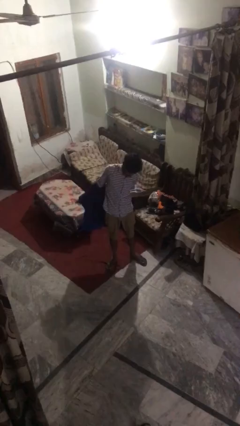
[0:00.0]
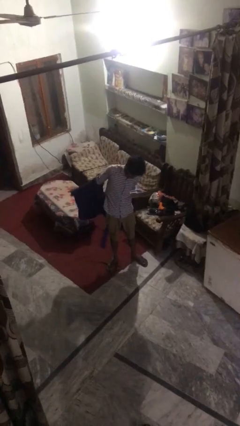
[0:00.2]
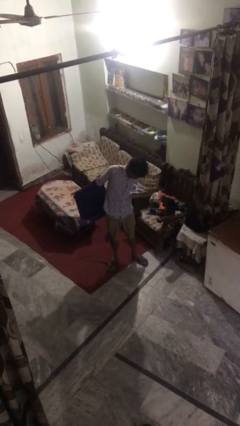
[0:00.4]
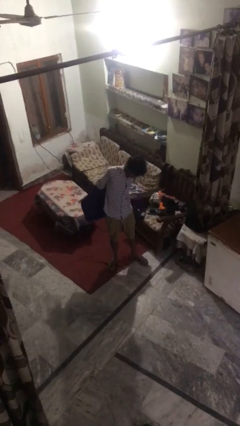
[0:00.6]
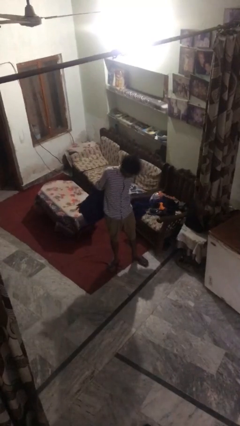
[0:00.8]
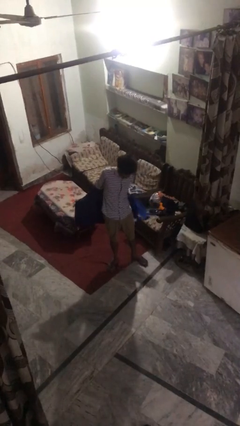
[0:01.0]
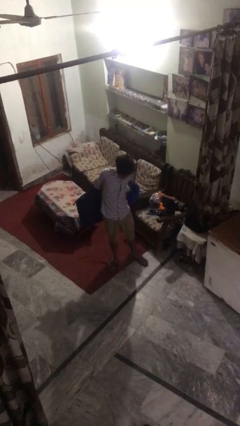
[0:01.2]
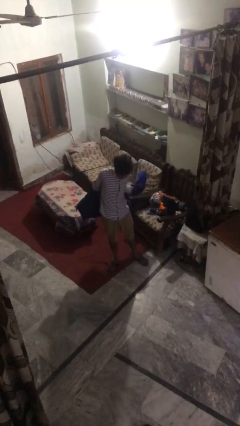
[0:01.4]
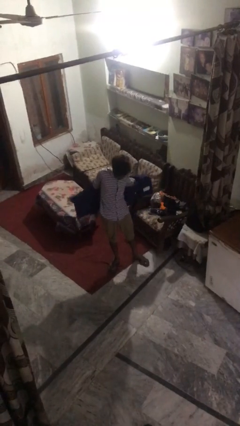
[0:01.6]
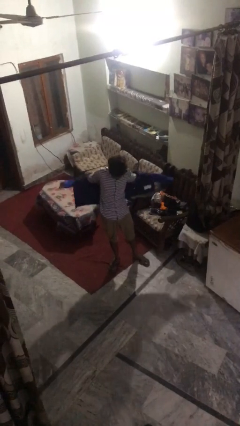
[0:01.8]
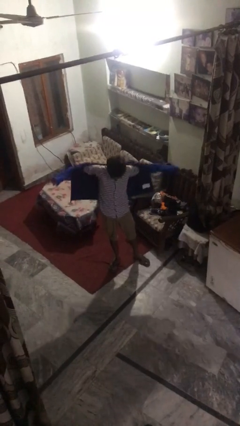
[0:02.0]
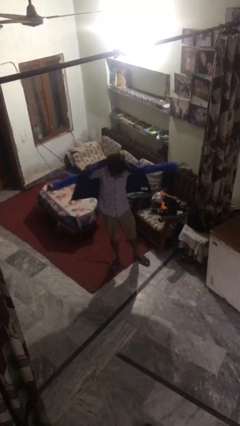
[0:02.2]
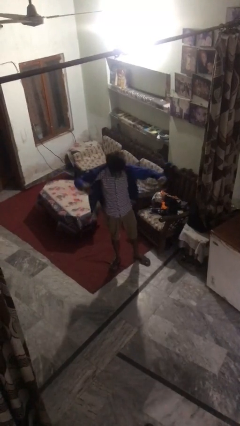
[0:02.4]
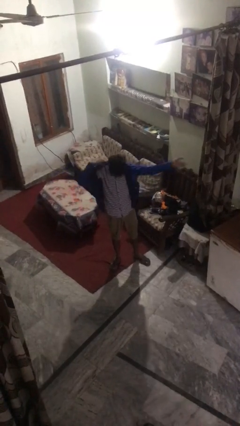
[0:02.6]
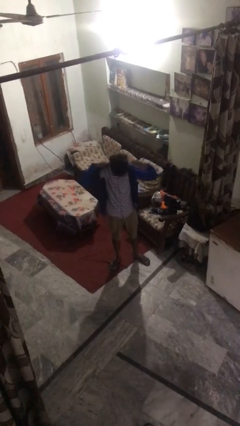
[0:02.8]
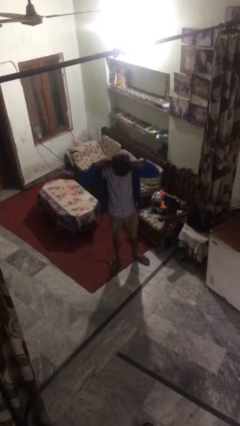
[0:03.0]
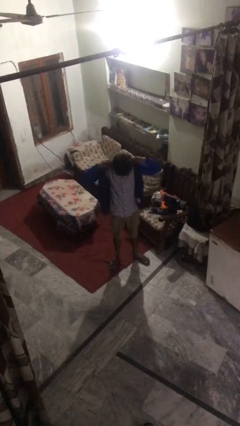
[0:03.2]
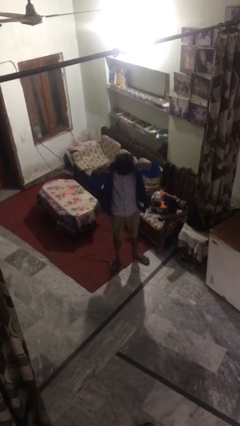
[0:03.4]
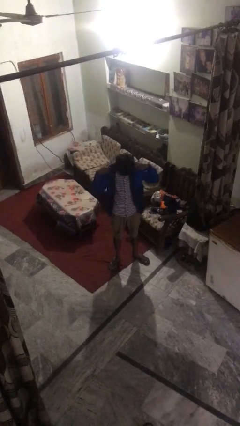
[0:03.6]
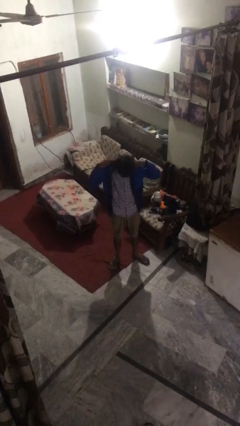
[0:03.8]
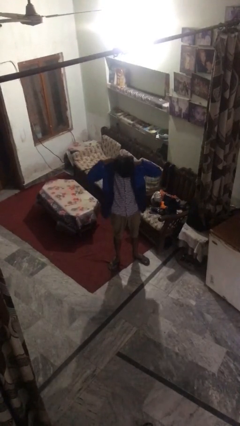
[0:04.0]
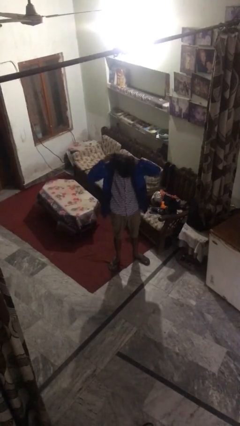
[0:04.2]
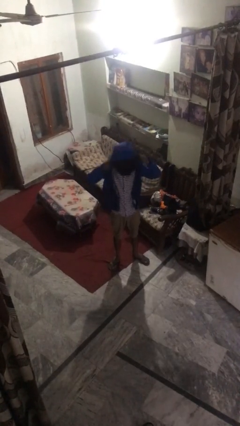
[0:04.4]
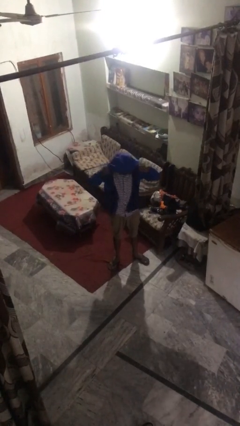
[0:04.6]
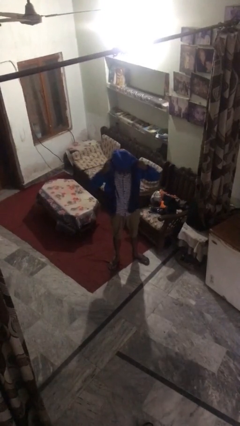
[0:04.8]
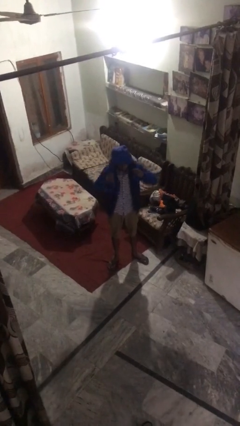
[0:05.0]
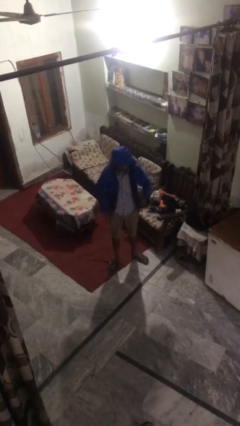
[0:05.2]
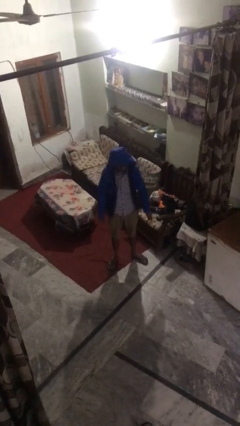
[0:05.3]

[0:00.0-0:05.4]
person puts on hoodie

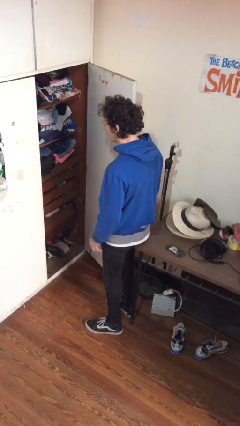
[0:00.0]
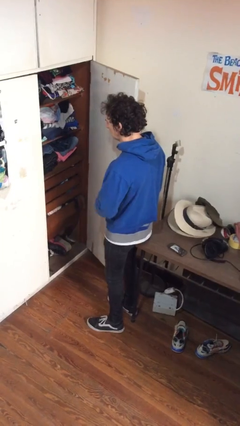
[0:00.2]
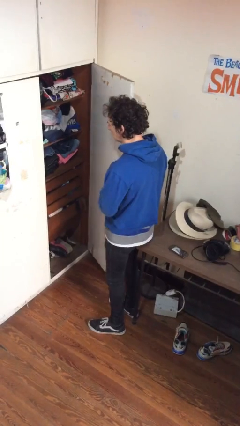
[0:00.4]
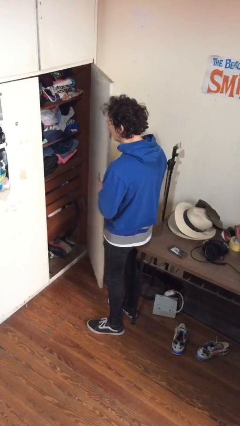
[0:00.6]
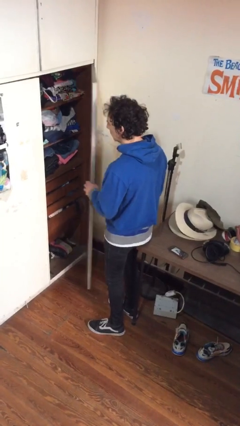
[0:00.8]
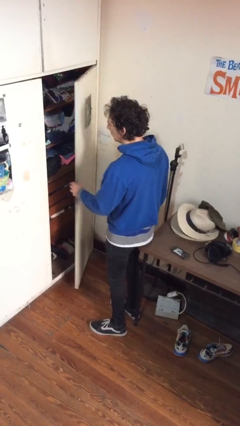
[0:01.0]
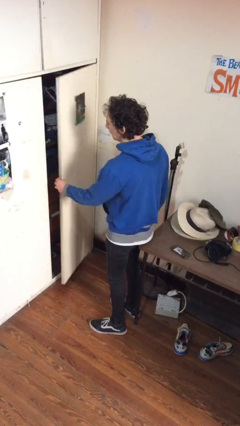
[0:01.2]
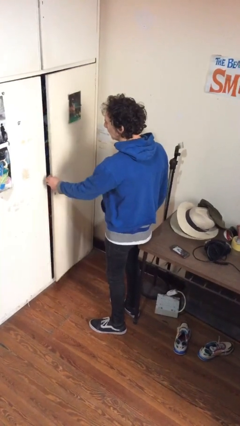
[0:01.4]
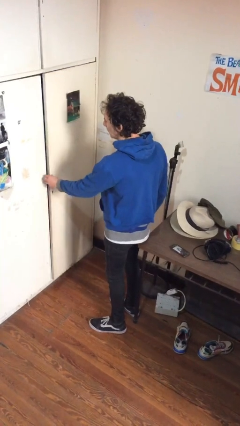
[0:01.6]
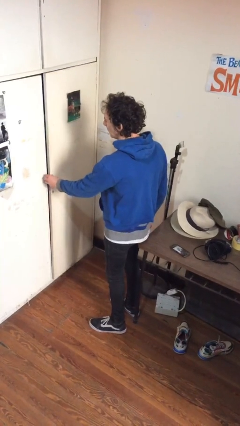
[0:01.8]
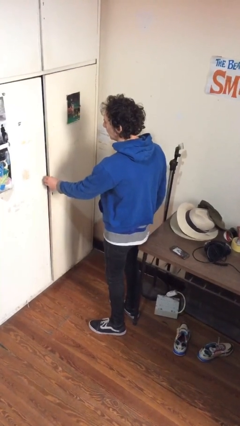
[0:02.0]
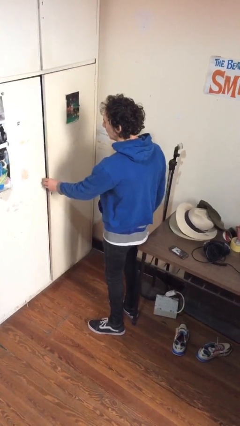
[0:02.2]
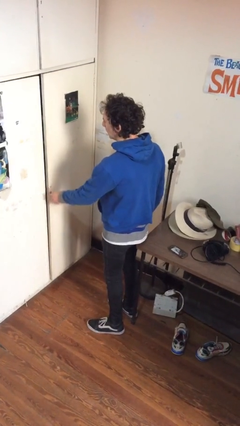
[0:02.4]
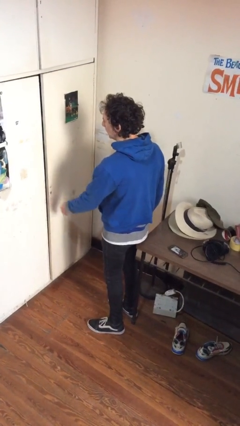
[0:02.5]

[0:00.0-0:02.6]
person closes closet door

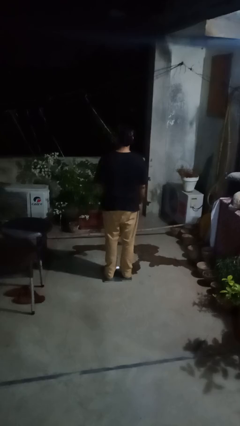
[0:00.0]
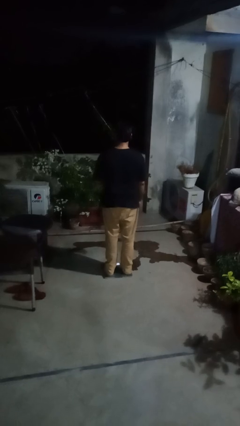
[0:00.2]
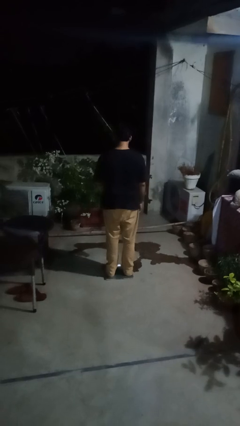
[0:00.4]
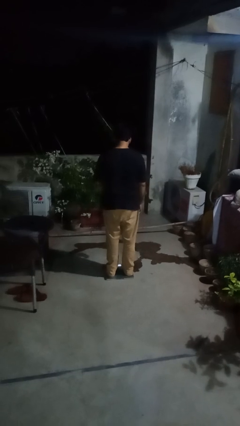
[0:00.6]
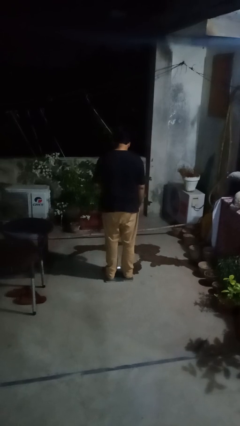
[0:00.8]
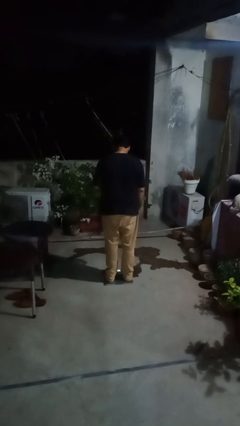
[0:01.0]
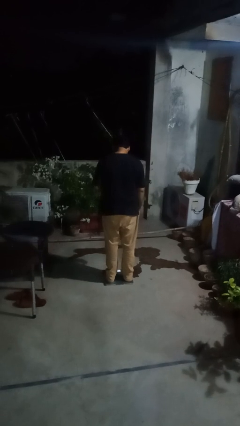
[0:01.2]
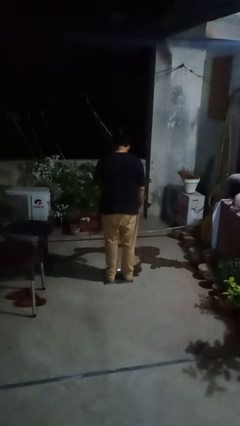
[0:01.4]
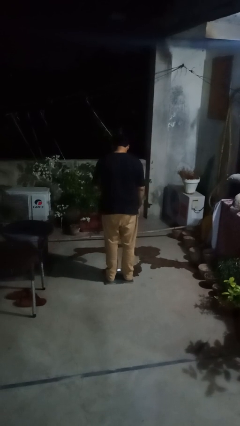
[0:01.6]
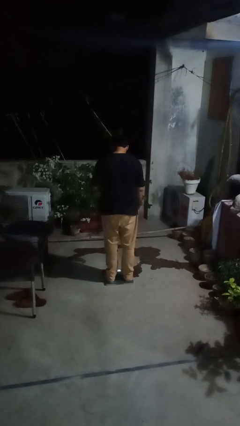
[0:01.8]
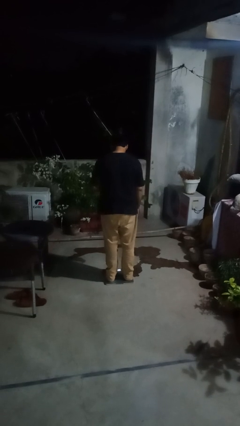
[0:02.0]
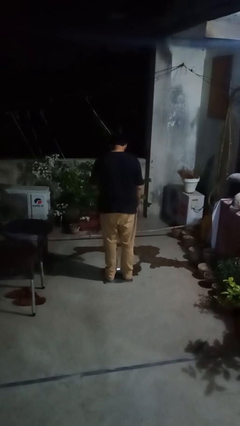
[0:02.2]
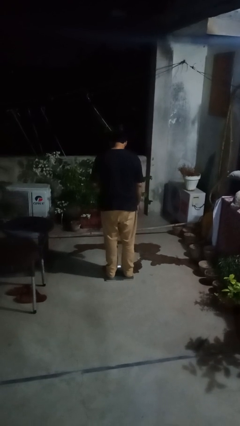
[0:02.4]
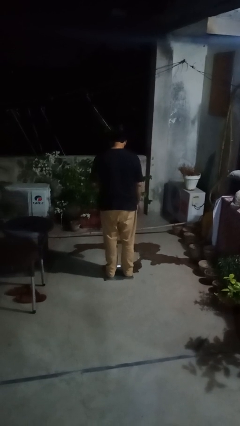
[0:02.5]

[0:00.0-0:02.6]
person uses bodyweight scale

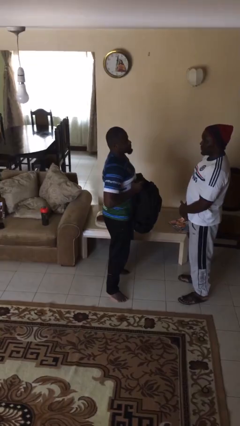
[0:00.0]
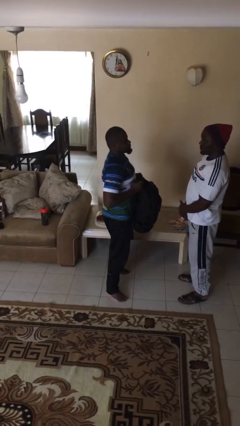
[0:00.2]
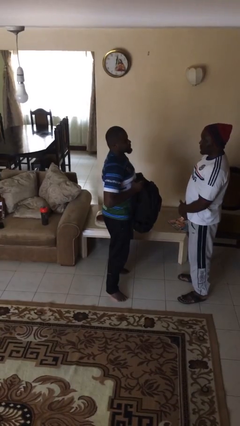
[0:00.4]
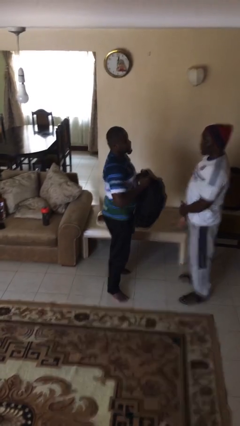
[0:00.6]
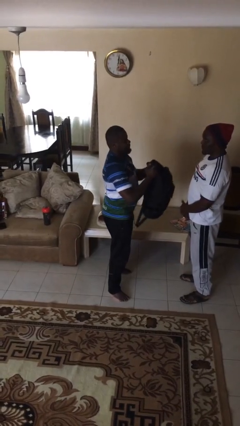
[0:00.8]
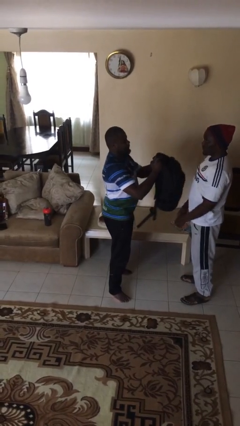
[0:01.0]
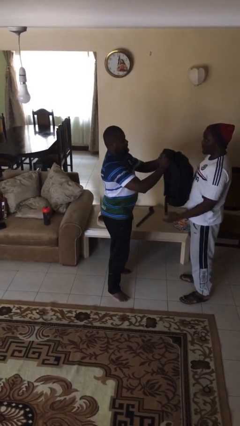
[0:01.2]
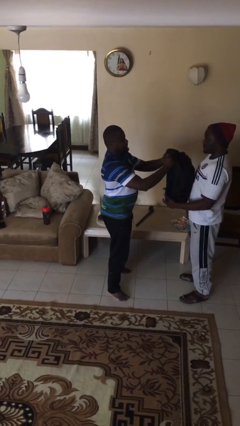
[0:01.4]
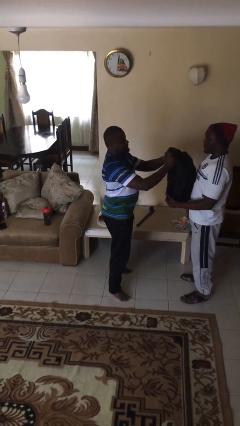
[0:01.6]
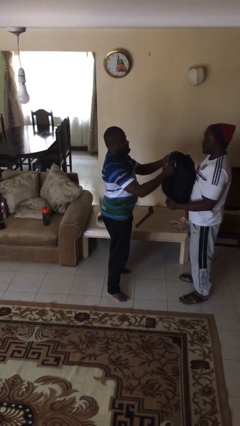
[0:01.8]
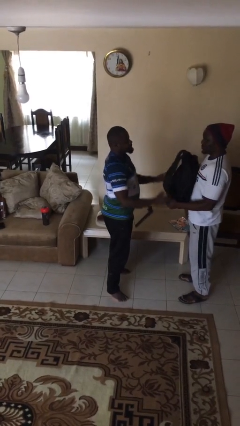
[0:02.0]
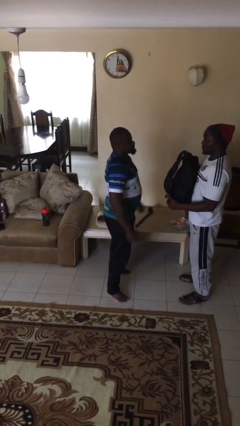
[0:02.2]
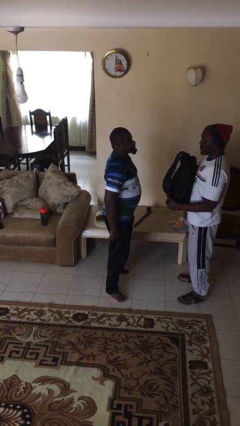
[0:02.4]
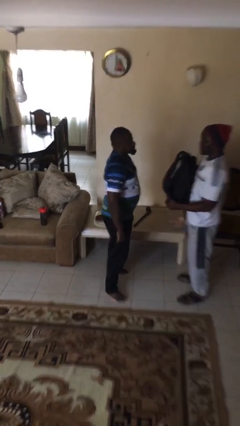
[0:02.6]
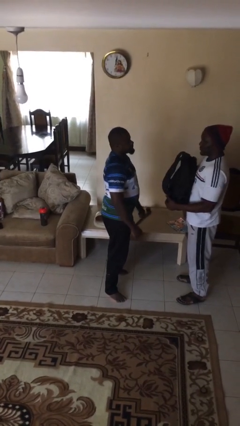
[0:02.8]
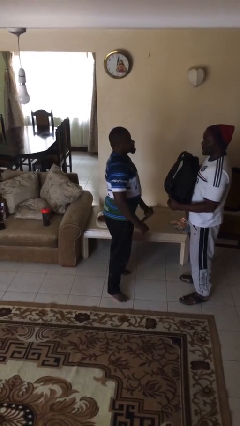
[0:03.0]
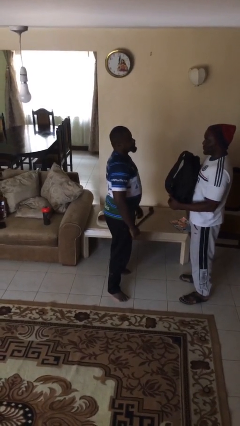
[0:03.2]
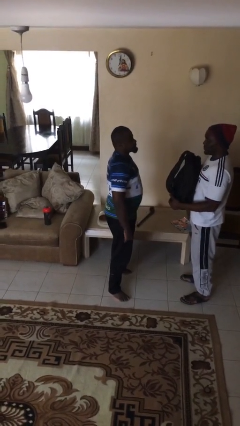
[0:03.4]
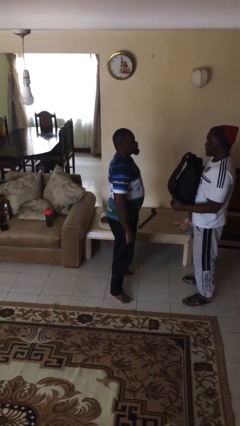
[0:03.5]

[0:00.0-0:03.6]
person transfers object to person

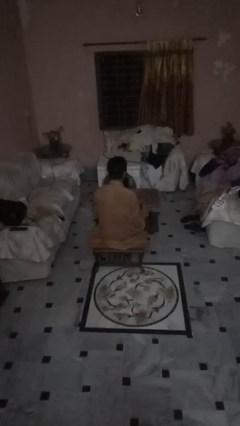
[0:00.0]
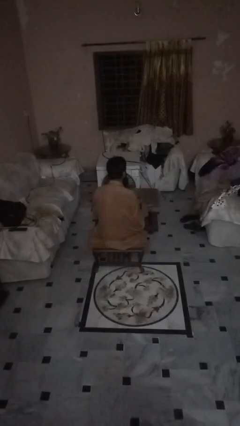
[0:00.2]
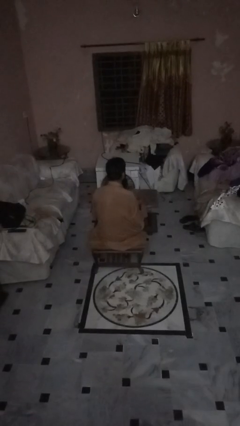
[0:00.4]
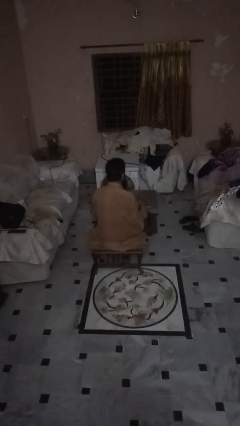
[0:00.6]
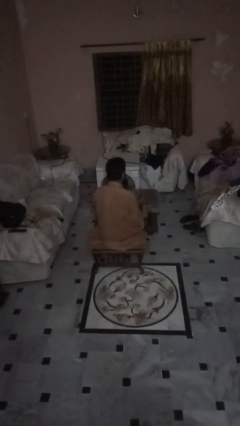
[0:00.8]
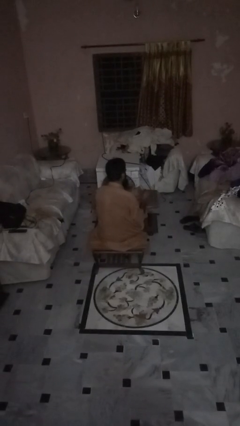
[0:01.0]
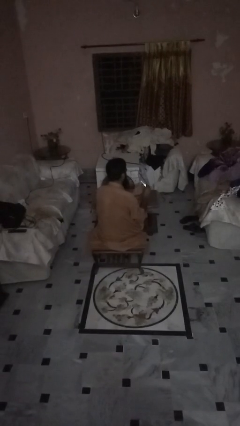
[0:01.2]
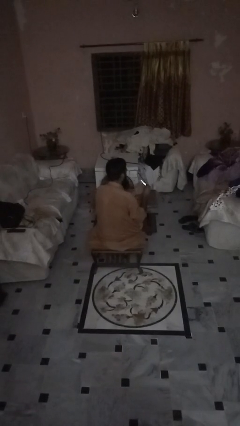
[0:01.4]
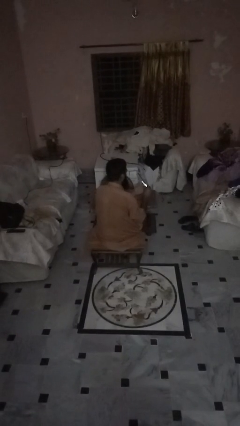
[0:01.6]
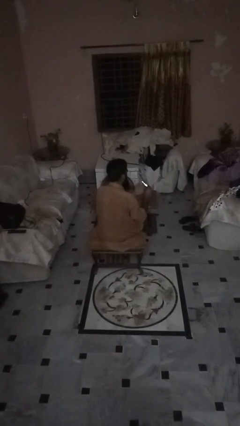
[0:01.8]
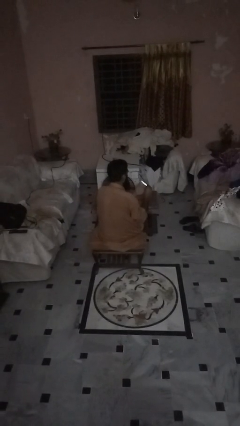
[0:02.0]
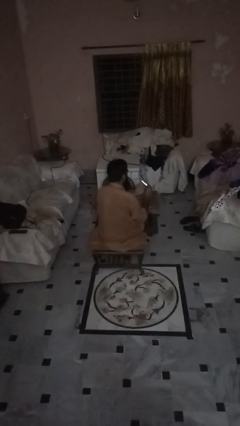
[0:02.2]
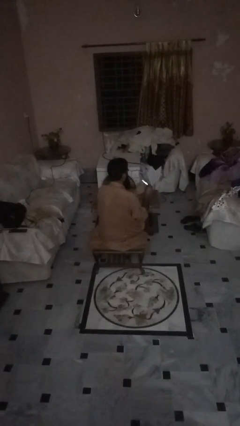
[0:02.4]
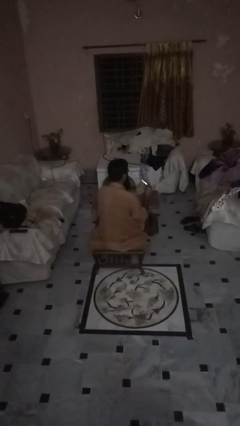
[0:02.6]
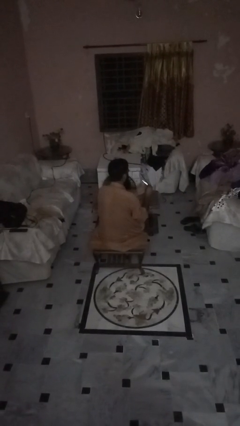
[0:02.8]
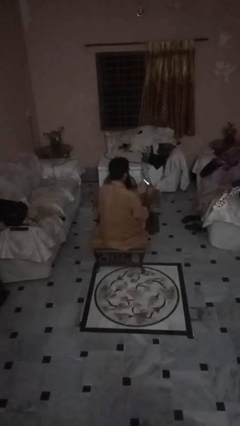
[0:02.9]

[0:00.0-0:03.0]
person files fingernails

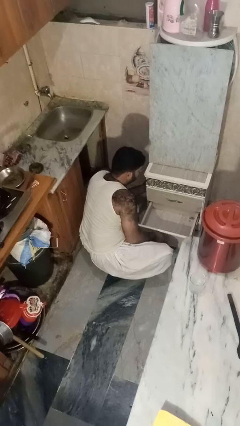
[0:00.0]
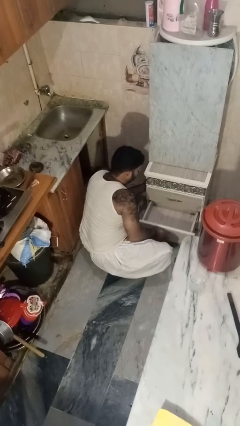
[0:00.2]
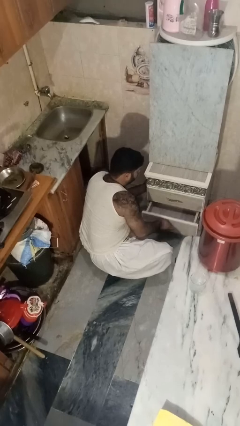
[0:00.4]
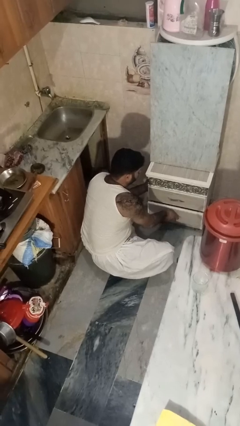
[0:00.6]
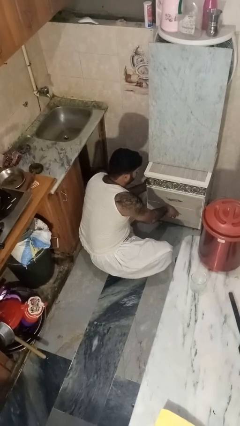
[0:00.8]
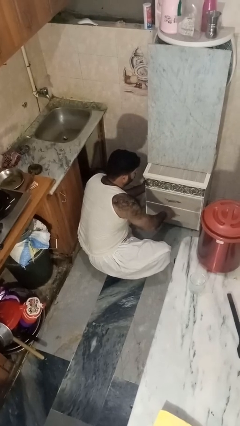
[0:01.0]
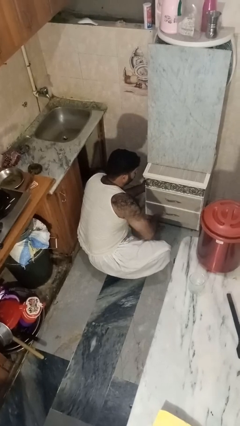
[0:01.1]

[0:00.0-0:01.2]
person closes kitchen drawer
